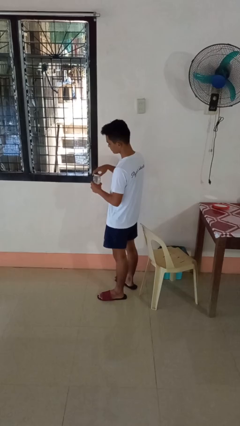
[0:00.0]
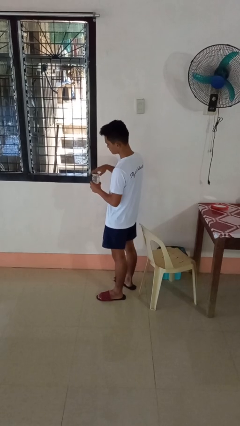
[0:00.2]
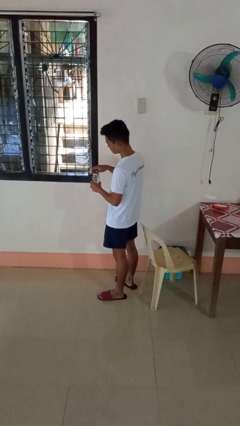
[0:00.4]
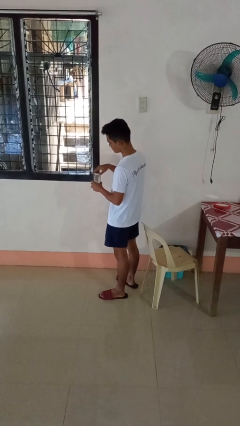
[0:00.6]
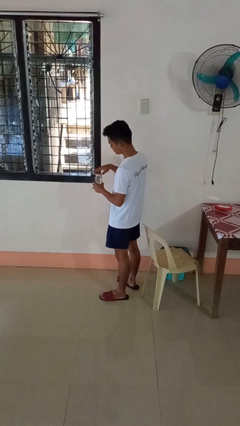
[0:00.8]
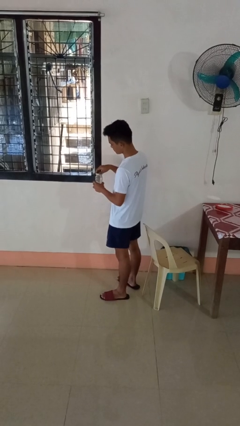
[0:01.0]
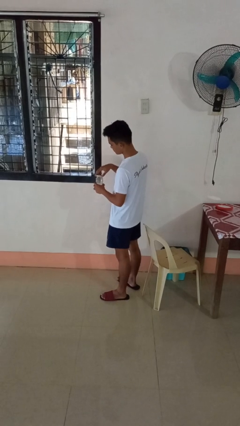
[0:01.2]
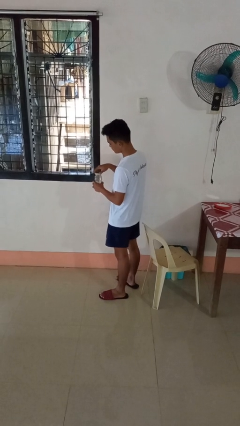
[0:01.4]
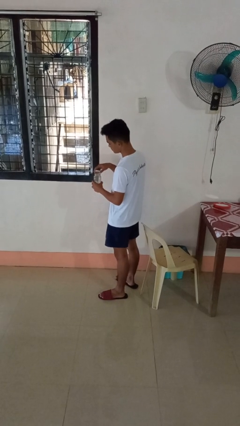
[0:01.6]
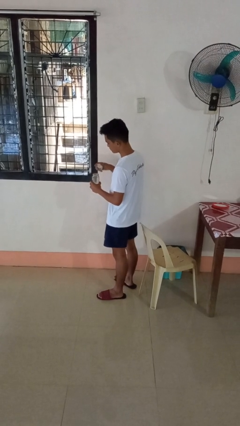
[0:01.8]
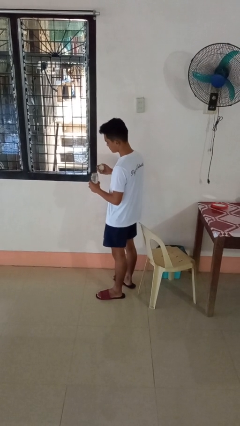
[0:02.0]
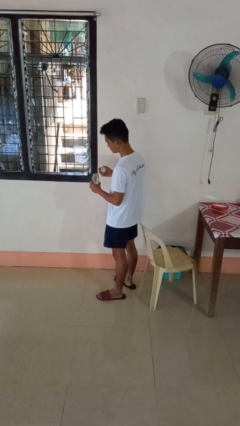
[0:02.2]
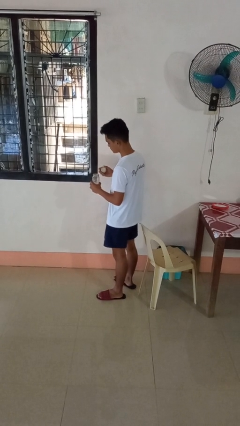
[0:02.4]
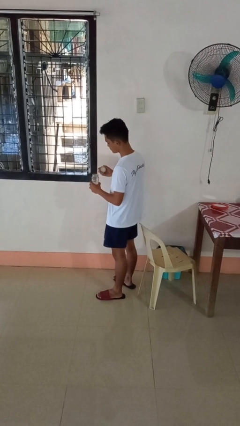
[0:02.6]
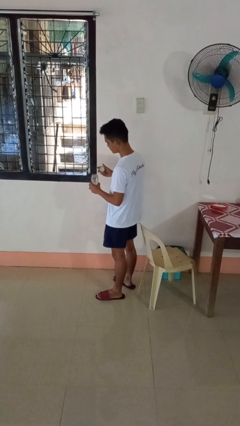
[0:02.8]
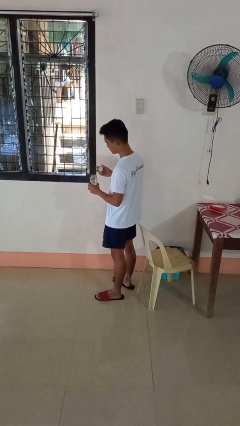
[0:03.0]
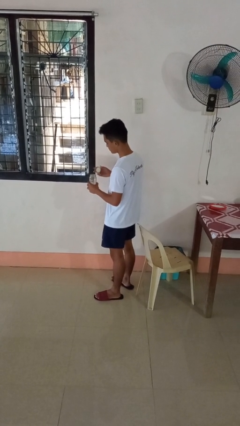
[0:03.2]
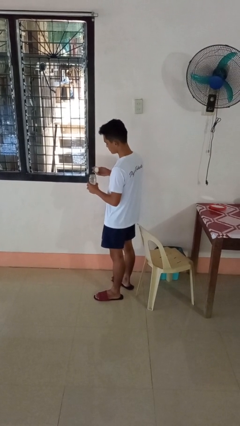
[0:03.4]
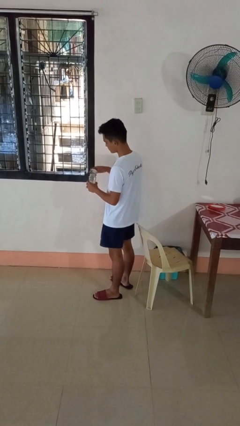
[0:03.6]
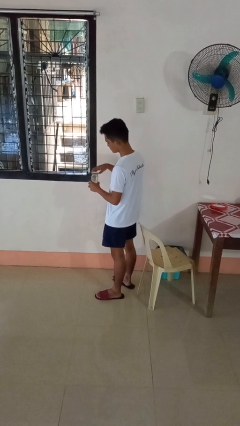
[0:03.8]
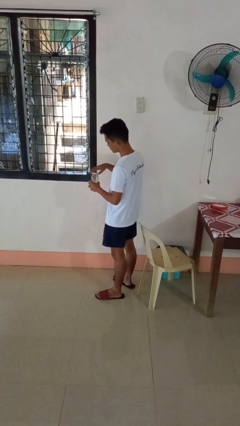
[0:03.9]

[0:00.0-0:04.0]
person opens jar

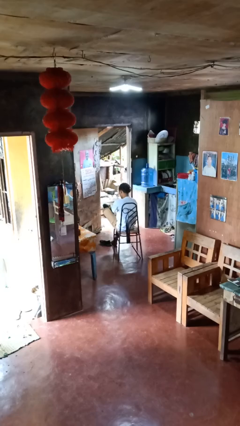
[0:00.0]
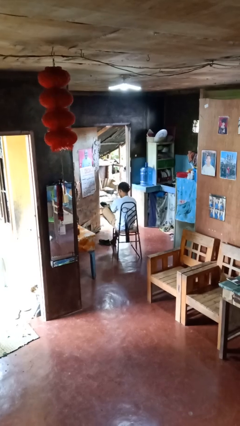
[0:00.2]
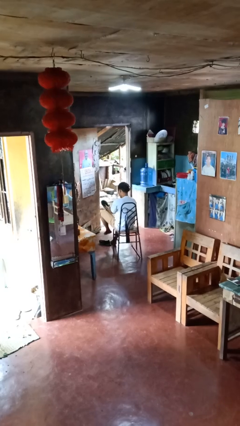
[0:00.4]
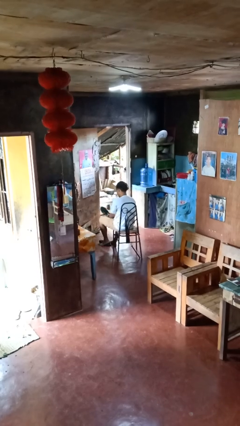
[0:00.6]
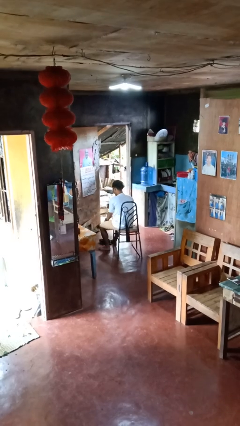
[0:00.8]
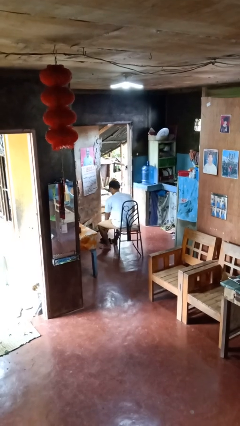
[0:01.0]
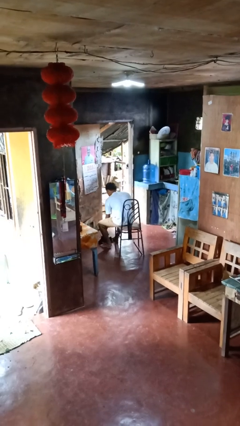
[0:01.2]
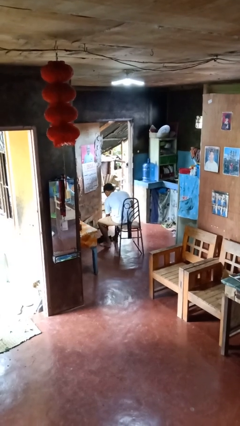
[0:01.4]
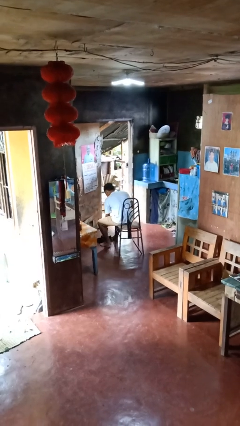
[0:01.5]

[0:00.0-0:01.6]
person takes off shoes

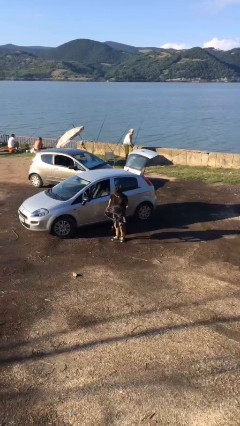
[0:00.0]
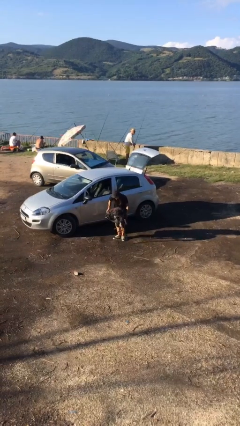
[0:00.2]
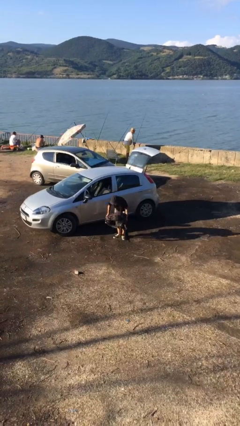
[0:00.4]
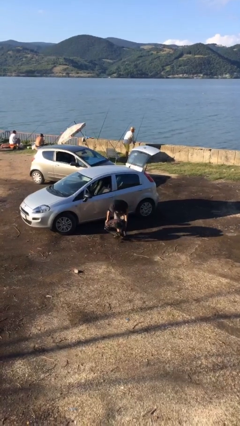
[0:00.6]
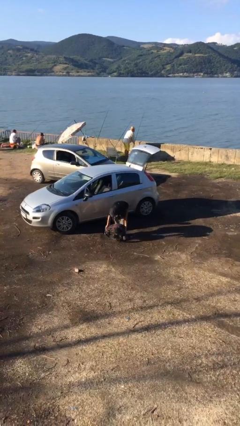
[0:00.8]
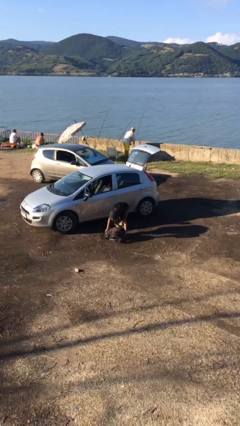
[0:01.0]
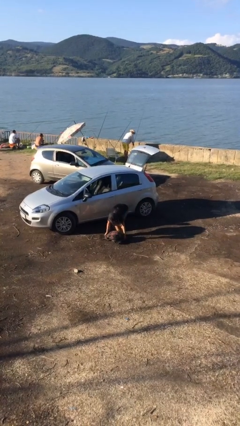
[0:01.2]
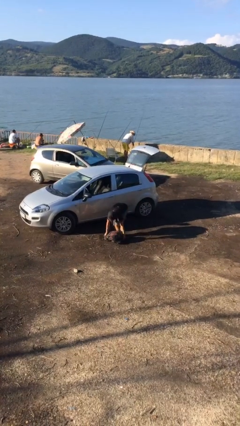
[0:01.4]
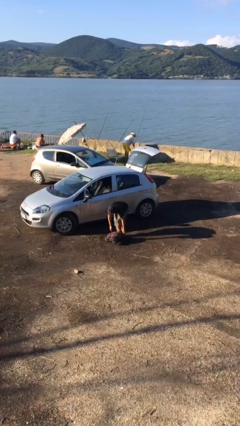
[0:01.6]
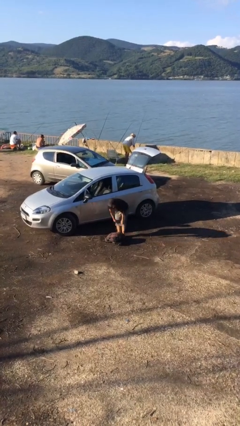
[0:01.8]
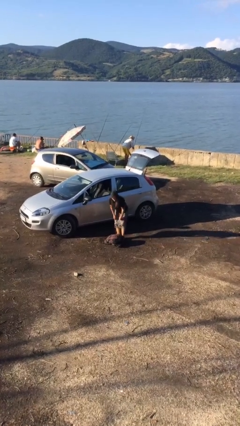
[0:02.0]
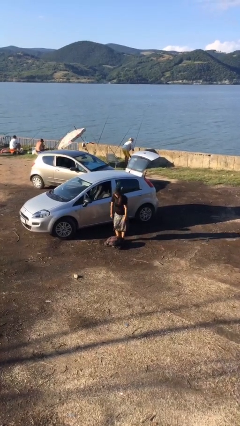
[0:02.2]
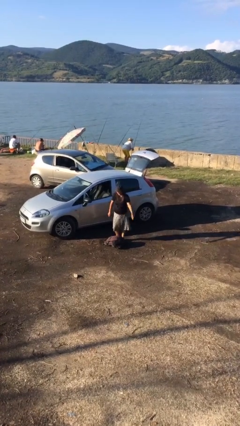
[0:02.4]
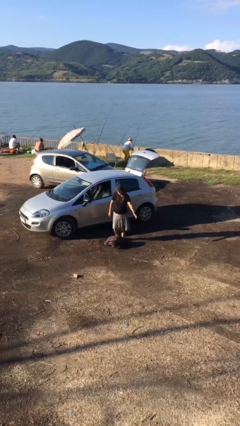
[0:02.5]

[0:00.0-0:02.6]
person puts down object on floor

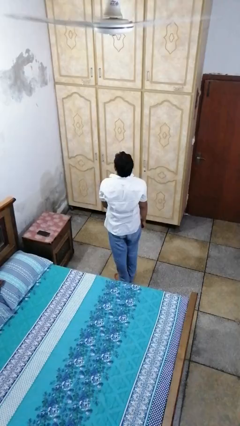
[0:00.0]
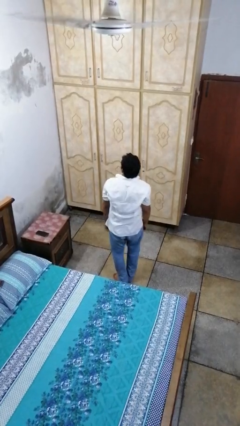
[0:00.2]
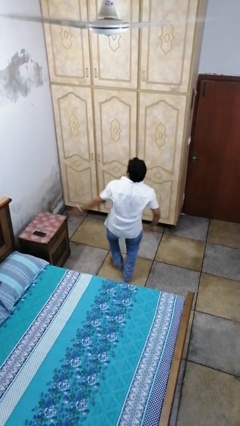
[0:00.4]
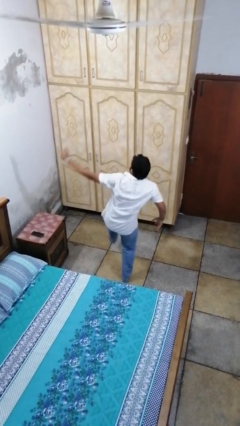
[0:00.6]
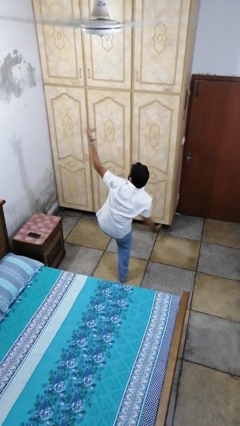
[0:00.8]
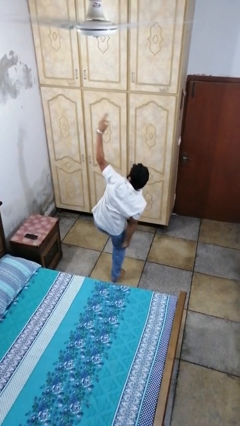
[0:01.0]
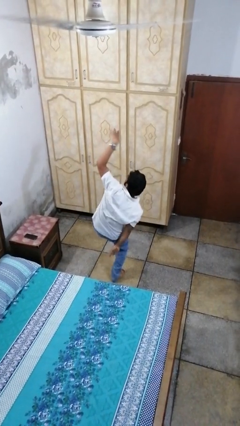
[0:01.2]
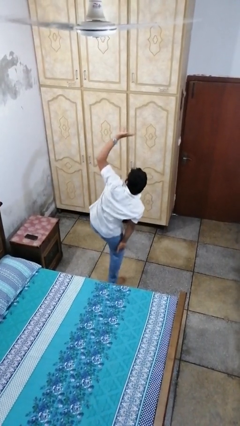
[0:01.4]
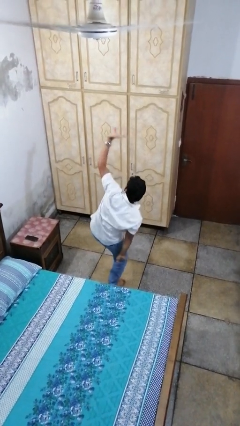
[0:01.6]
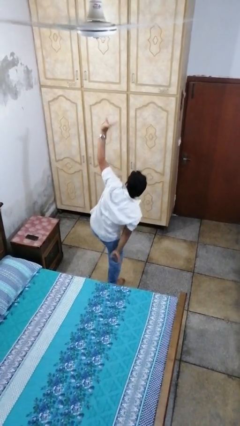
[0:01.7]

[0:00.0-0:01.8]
person dances in place

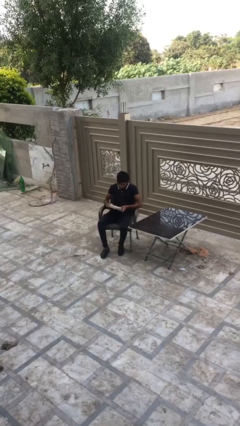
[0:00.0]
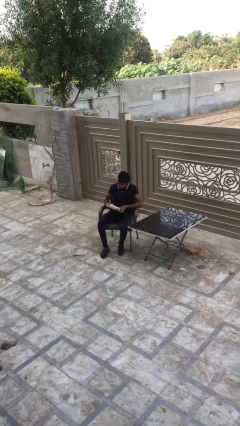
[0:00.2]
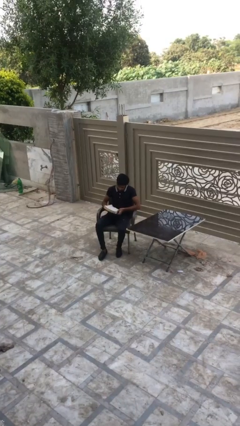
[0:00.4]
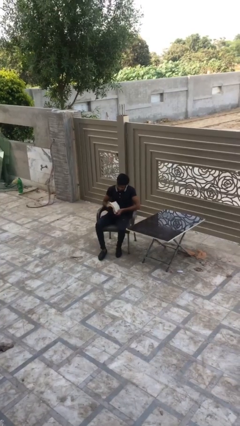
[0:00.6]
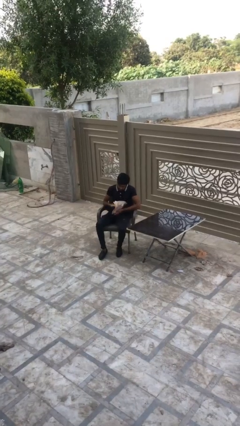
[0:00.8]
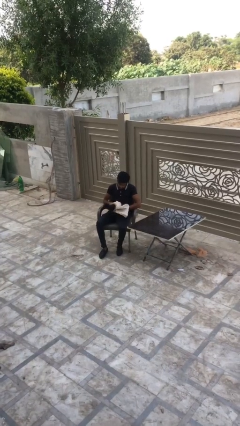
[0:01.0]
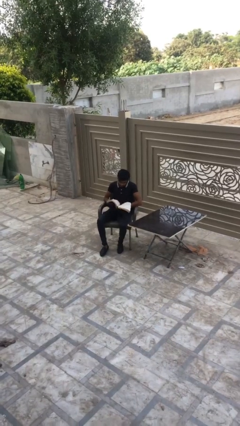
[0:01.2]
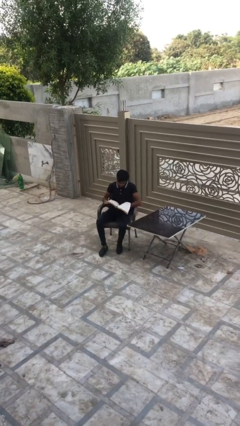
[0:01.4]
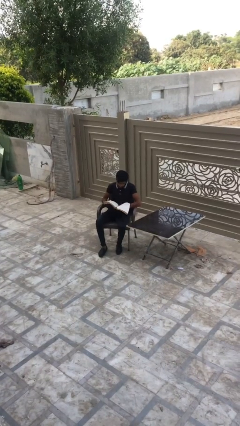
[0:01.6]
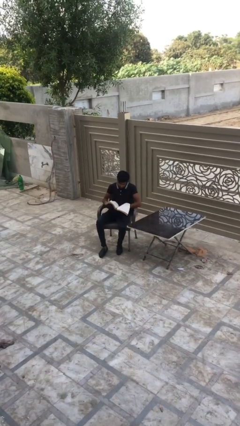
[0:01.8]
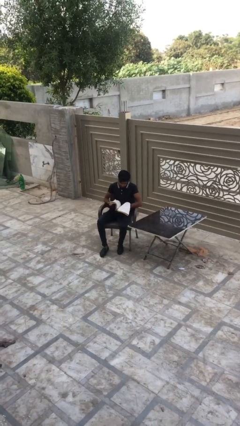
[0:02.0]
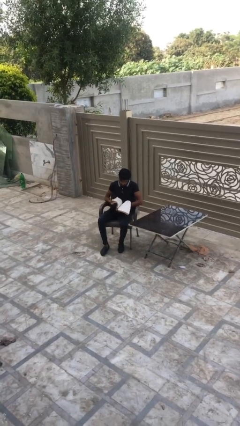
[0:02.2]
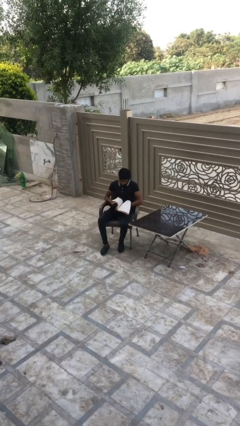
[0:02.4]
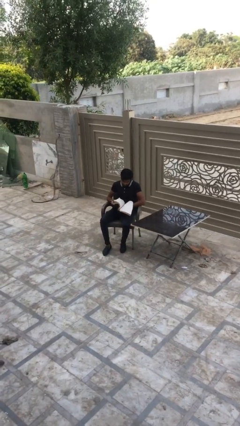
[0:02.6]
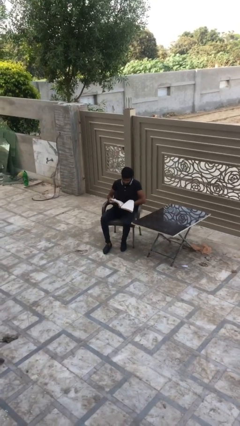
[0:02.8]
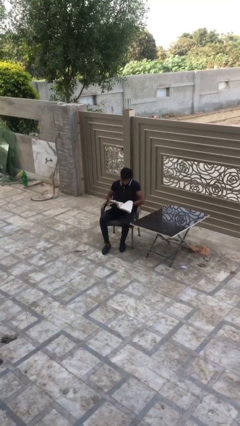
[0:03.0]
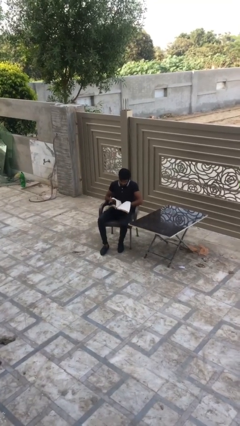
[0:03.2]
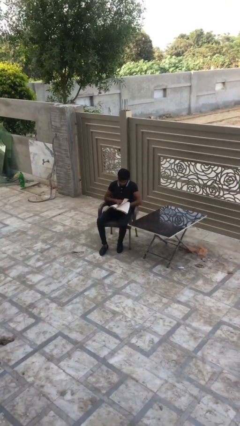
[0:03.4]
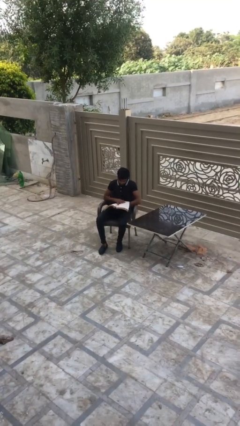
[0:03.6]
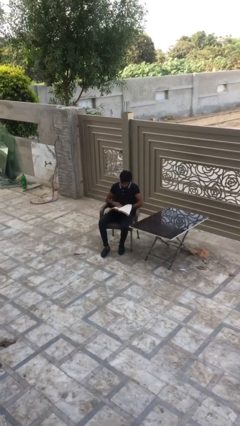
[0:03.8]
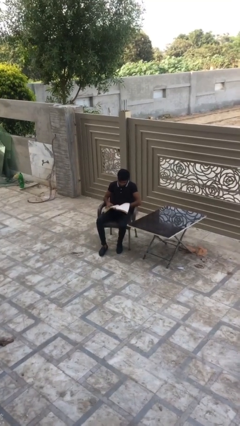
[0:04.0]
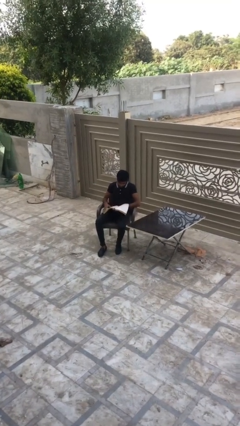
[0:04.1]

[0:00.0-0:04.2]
person reads document

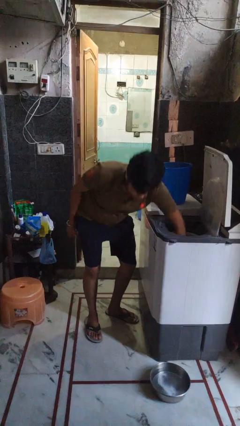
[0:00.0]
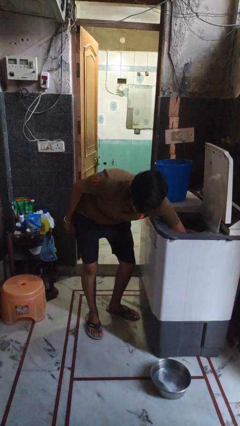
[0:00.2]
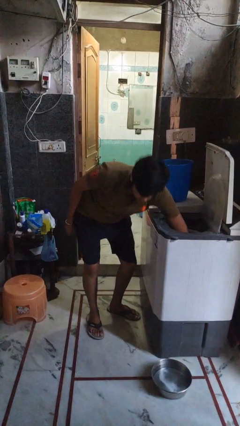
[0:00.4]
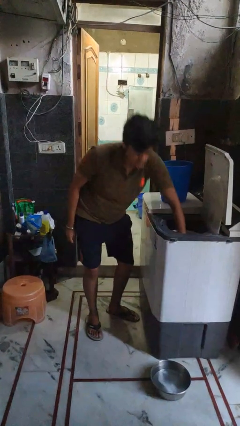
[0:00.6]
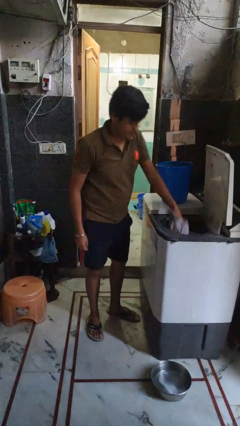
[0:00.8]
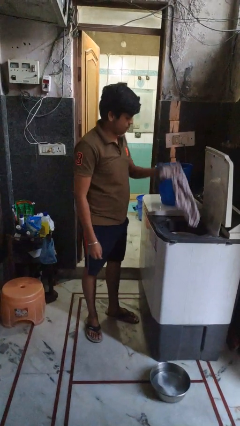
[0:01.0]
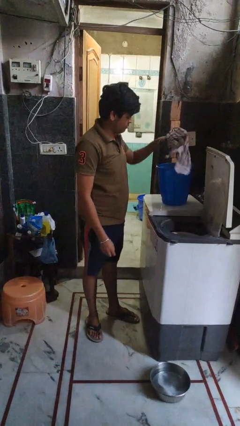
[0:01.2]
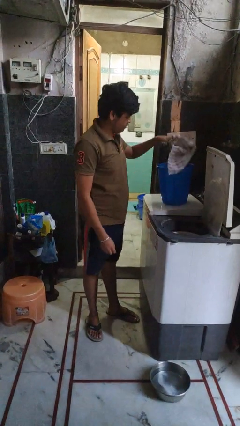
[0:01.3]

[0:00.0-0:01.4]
person unloads dryer

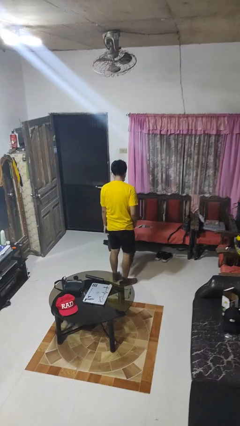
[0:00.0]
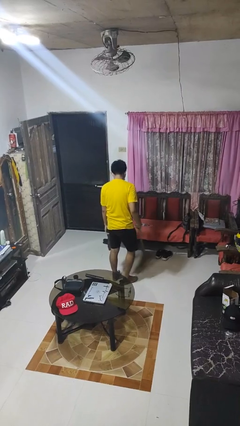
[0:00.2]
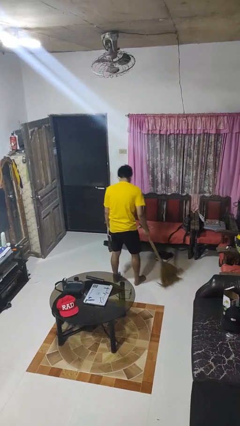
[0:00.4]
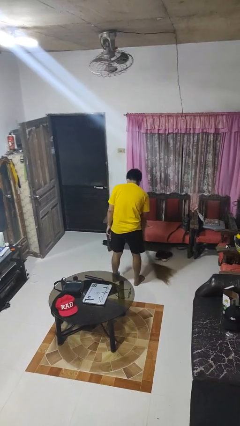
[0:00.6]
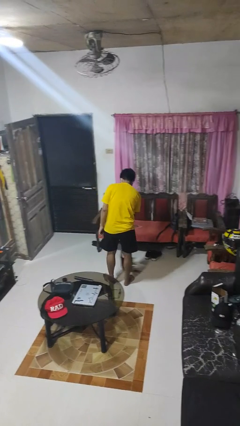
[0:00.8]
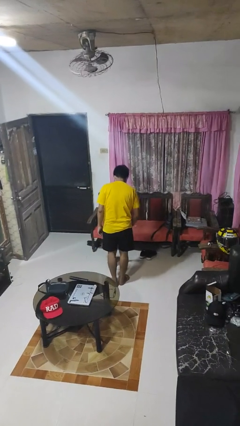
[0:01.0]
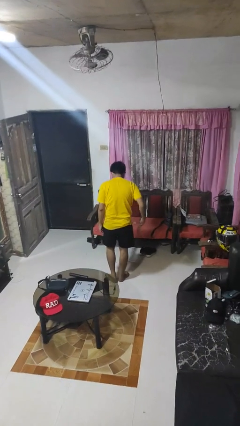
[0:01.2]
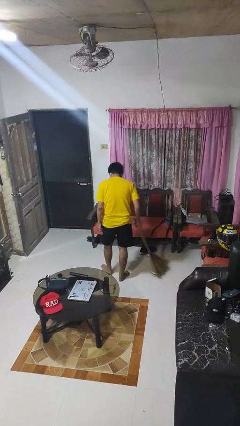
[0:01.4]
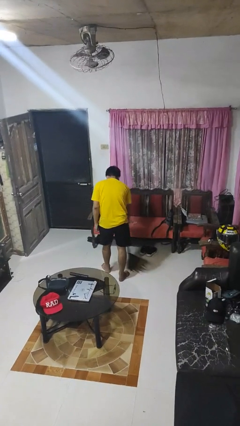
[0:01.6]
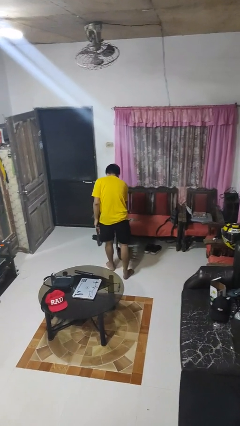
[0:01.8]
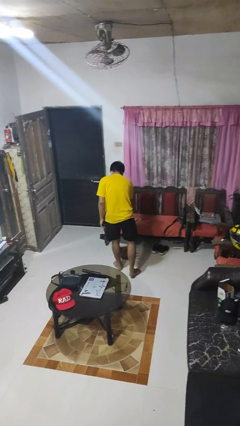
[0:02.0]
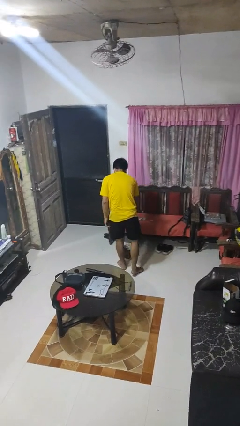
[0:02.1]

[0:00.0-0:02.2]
person sweeps floor
